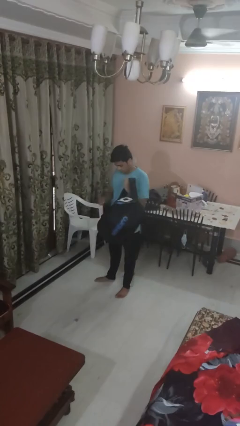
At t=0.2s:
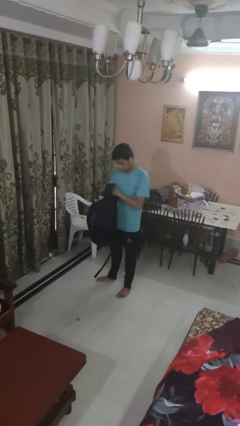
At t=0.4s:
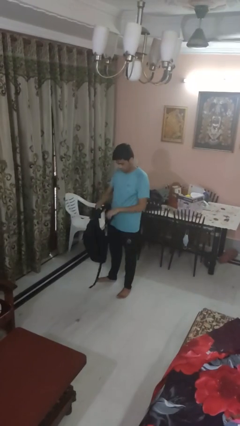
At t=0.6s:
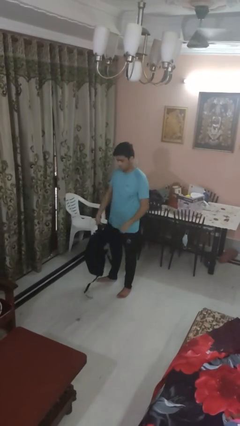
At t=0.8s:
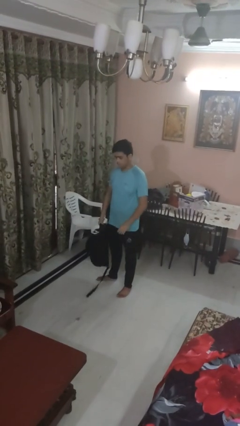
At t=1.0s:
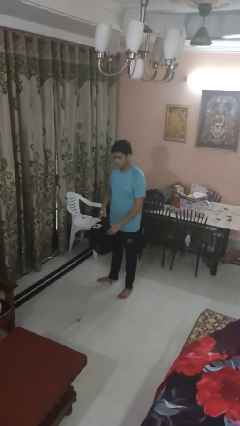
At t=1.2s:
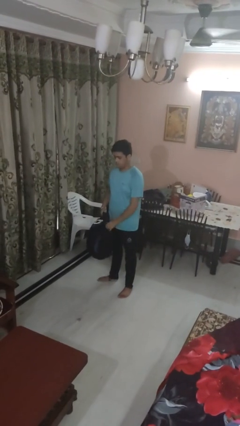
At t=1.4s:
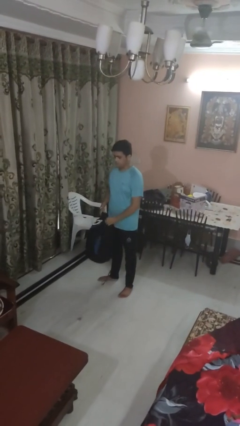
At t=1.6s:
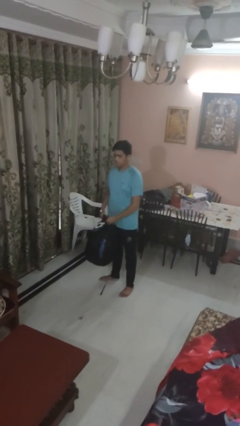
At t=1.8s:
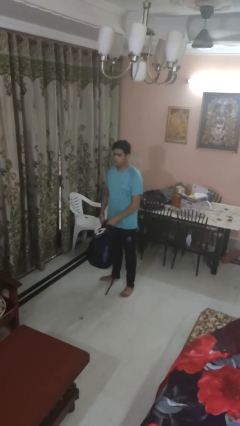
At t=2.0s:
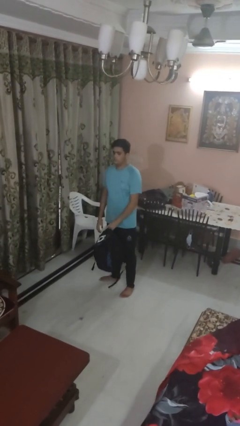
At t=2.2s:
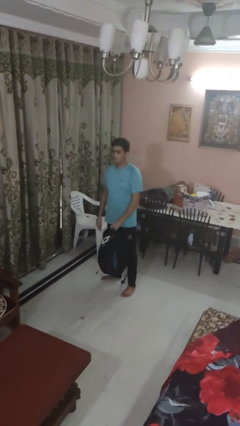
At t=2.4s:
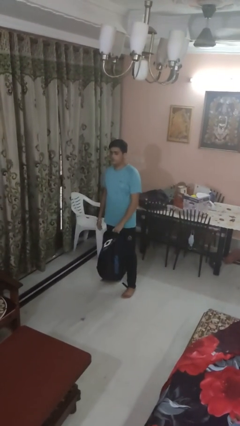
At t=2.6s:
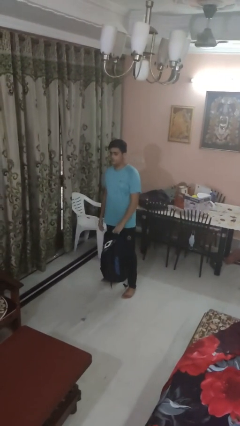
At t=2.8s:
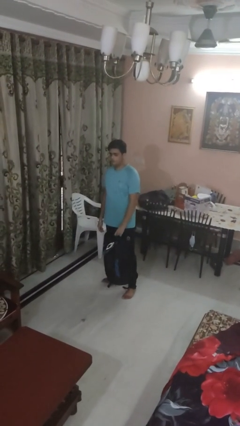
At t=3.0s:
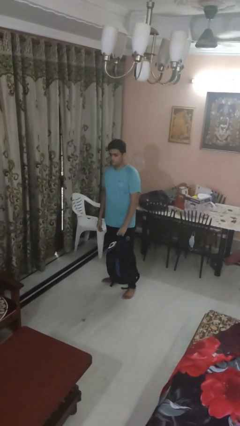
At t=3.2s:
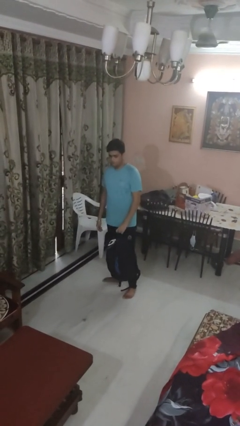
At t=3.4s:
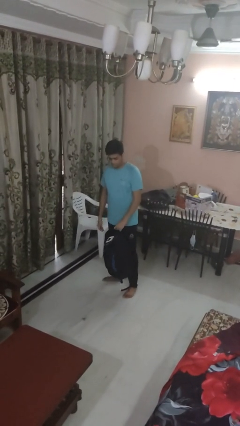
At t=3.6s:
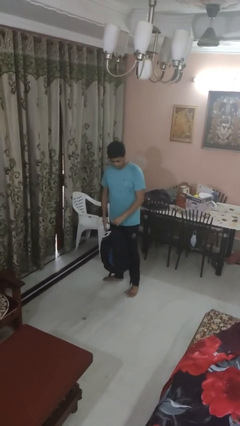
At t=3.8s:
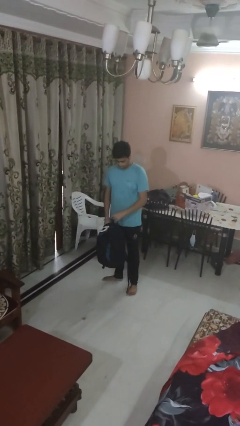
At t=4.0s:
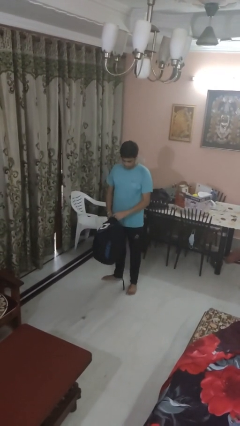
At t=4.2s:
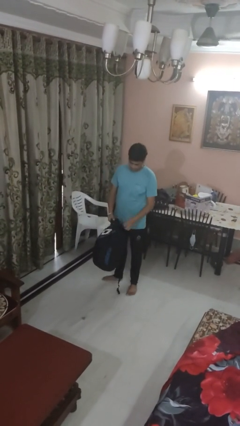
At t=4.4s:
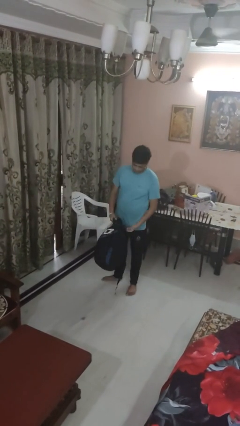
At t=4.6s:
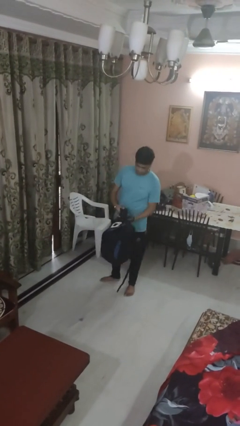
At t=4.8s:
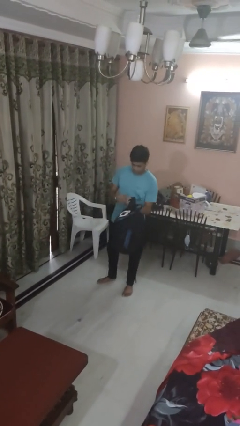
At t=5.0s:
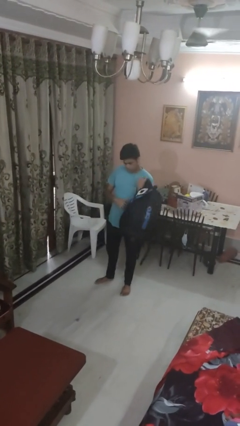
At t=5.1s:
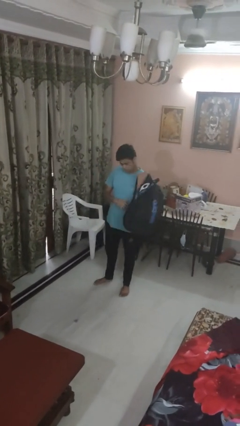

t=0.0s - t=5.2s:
person takes off backpack

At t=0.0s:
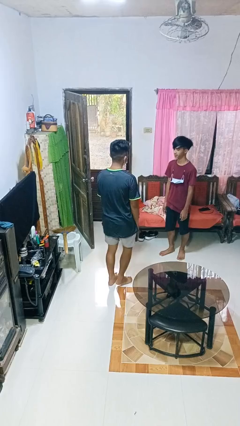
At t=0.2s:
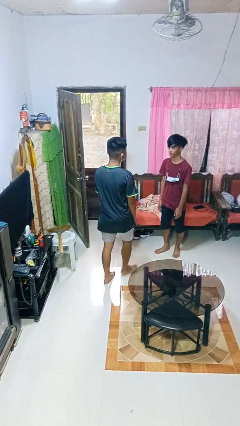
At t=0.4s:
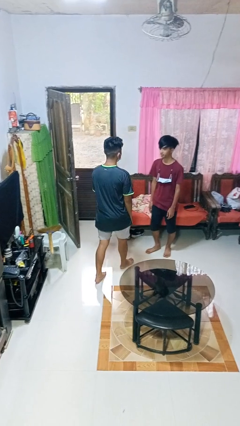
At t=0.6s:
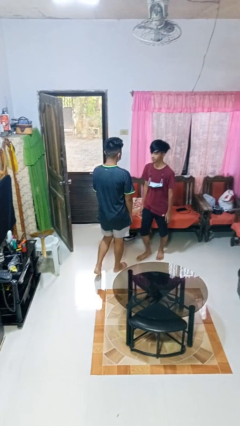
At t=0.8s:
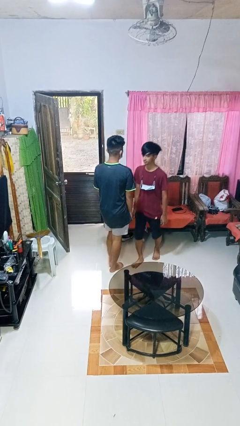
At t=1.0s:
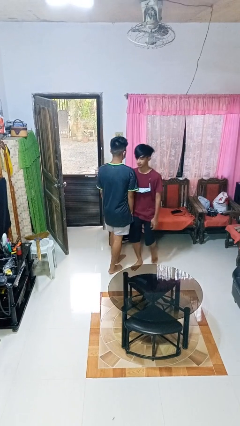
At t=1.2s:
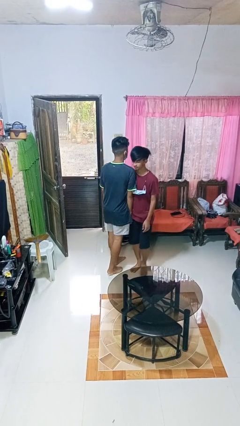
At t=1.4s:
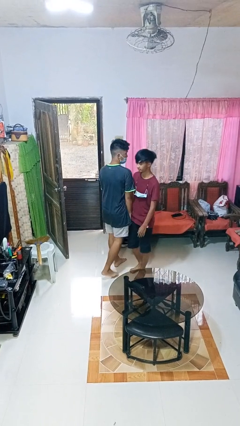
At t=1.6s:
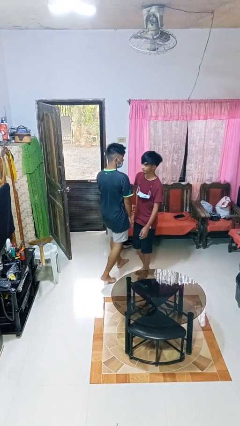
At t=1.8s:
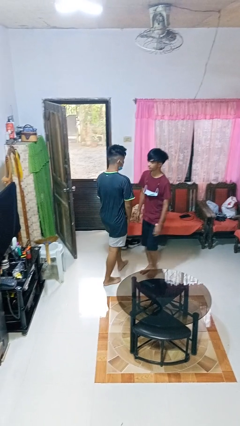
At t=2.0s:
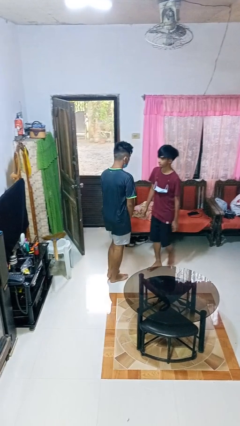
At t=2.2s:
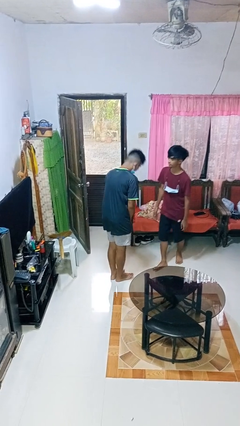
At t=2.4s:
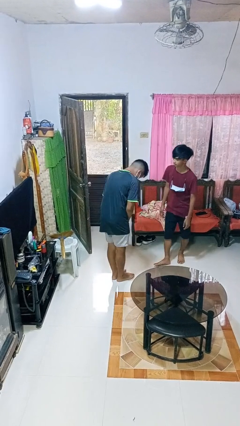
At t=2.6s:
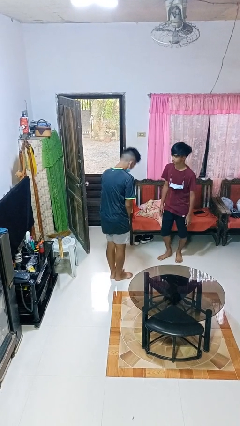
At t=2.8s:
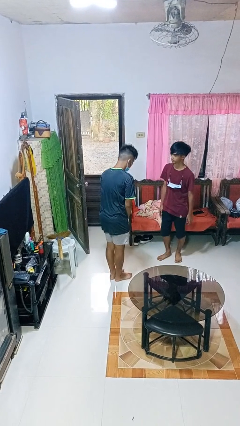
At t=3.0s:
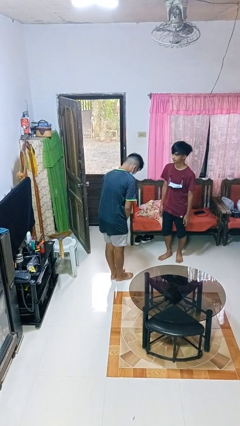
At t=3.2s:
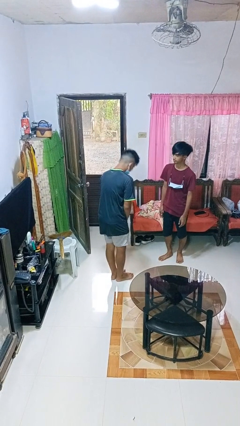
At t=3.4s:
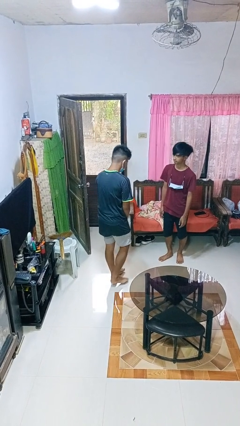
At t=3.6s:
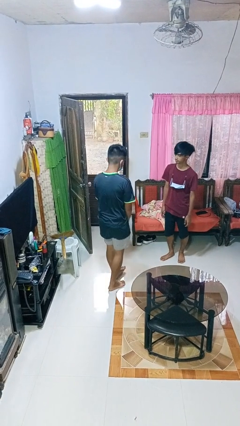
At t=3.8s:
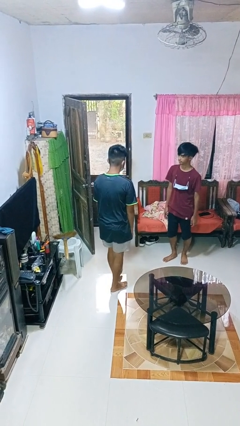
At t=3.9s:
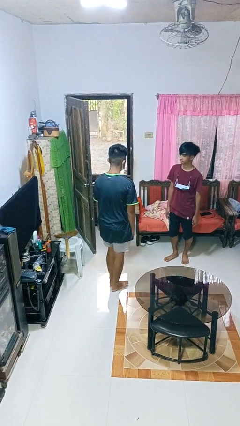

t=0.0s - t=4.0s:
person bumps into person

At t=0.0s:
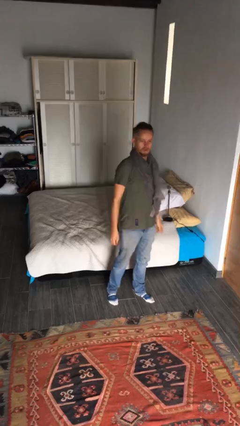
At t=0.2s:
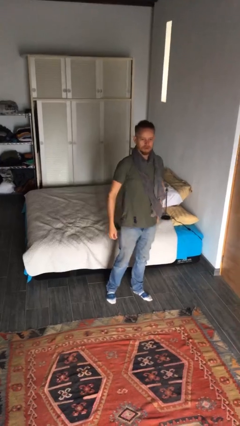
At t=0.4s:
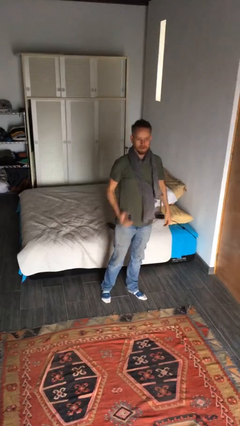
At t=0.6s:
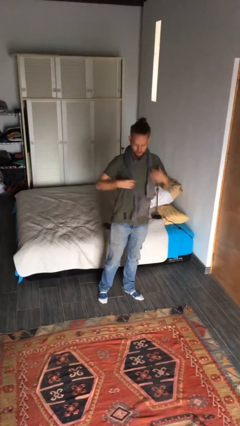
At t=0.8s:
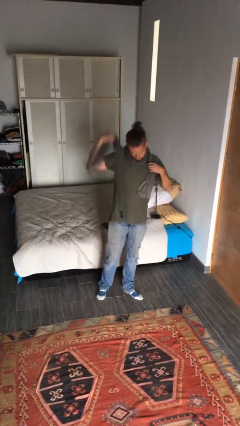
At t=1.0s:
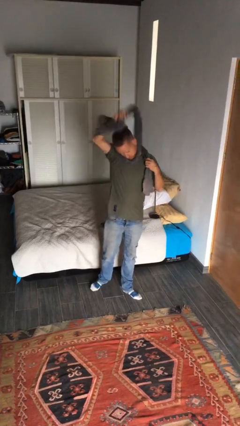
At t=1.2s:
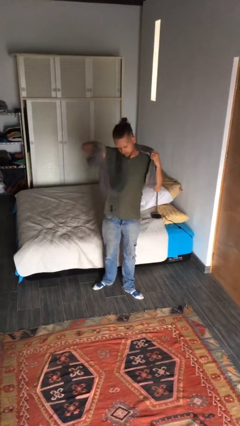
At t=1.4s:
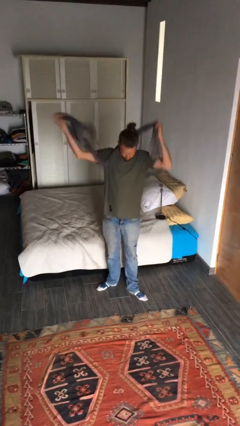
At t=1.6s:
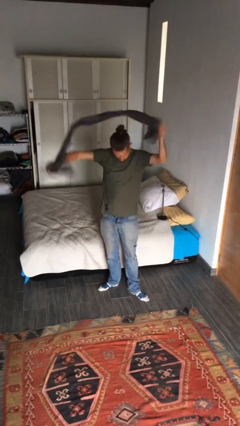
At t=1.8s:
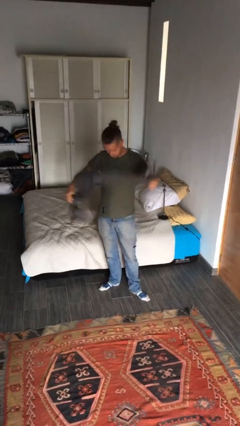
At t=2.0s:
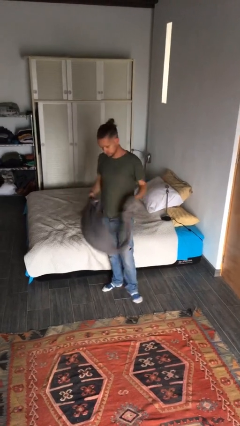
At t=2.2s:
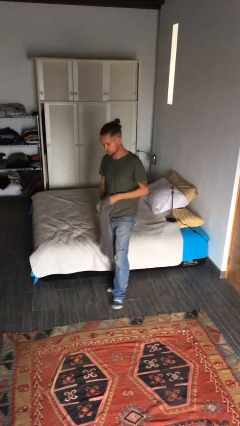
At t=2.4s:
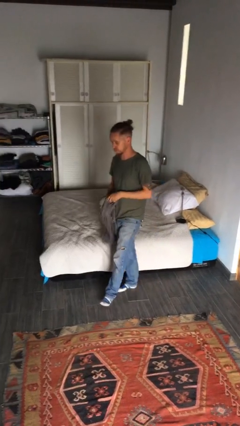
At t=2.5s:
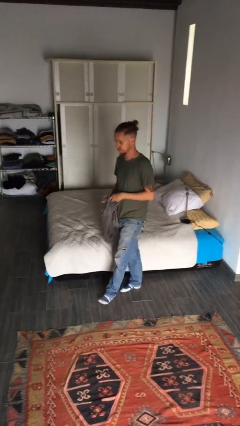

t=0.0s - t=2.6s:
person takes off scarf

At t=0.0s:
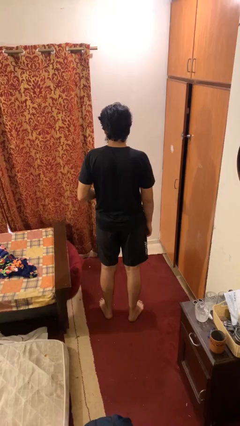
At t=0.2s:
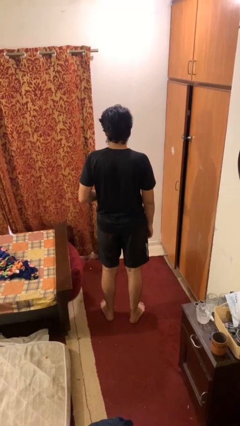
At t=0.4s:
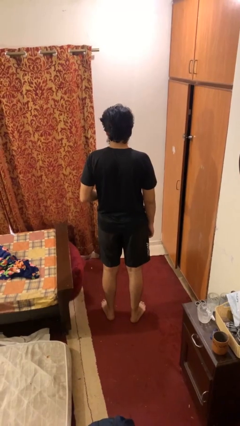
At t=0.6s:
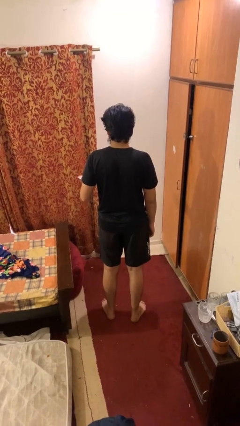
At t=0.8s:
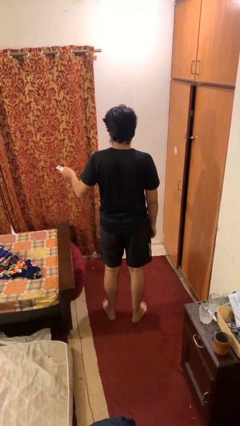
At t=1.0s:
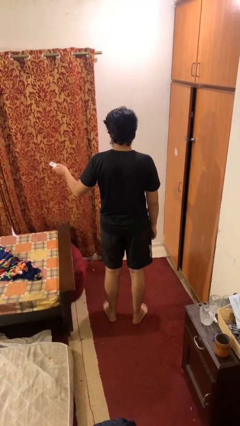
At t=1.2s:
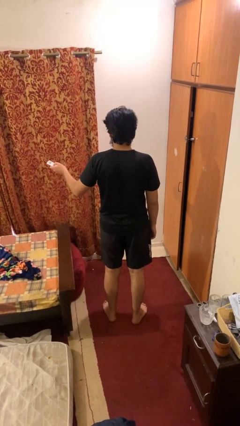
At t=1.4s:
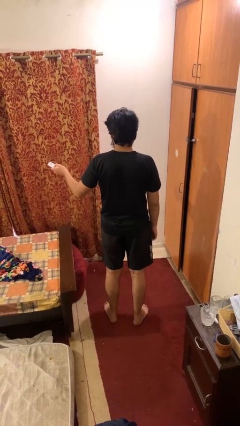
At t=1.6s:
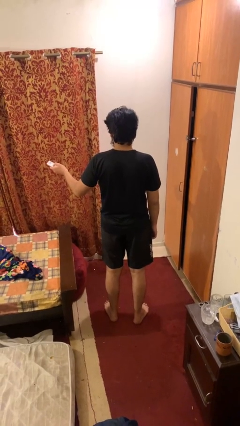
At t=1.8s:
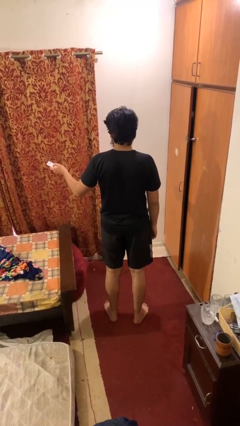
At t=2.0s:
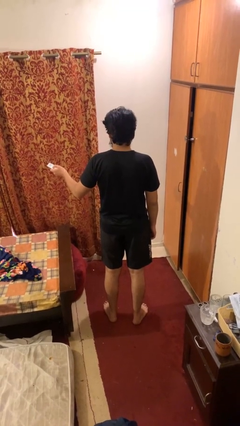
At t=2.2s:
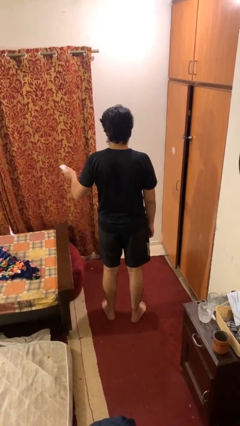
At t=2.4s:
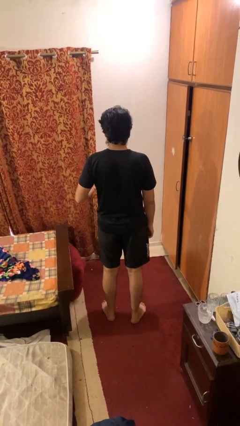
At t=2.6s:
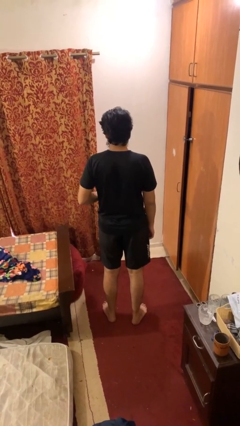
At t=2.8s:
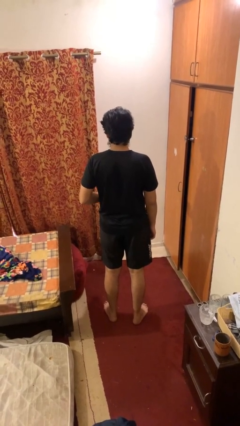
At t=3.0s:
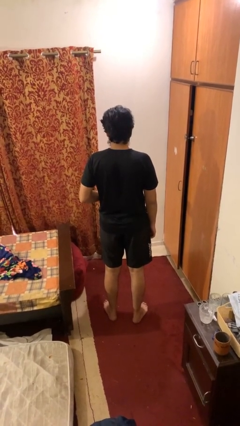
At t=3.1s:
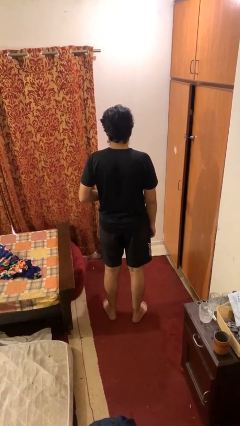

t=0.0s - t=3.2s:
person uses television remote

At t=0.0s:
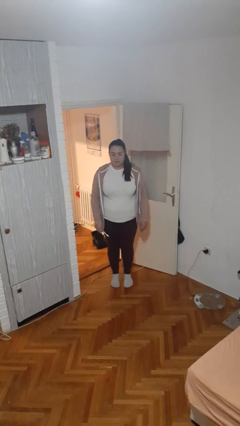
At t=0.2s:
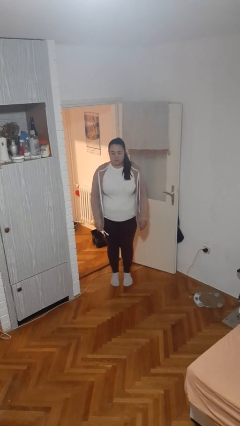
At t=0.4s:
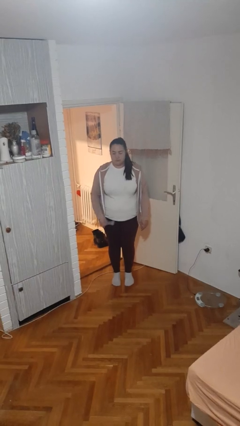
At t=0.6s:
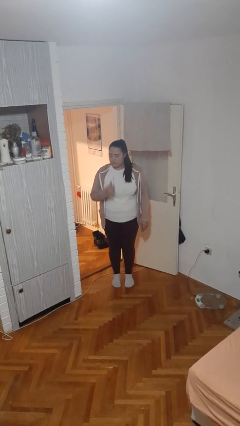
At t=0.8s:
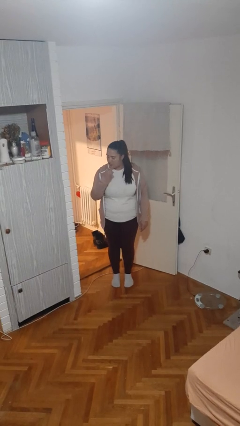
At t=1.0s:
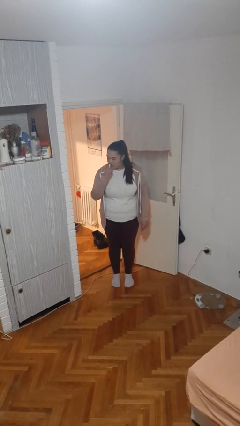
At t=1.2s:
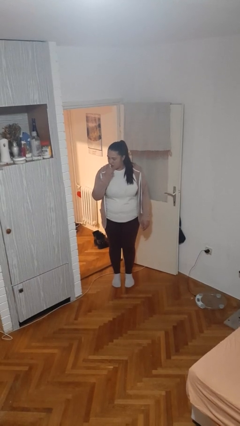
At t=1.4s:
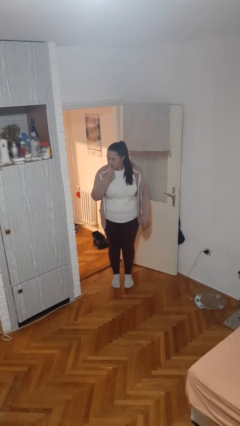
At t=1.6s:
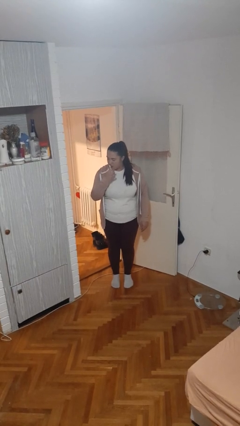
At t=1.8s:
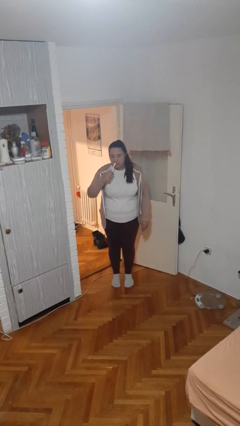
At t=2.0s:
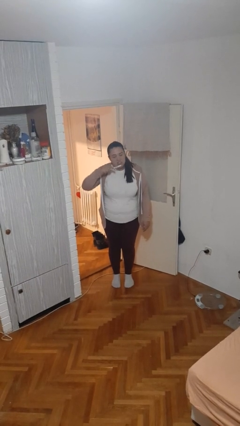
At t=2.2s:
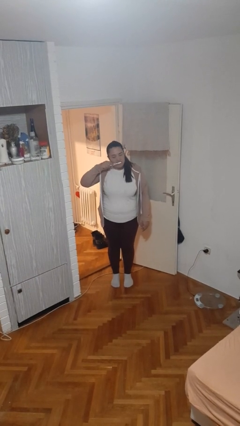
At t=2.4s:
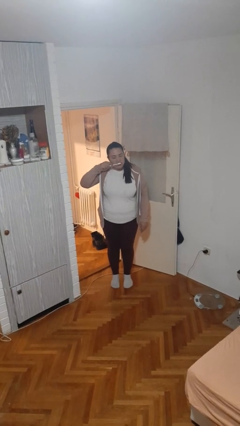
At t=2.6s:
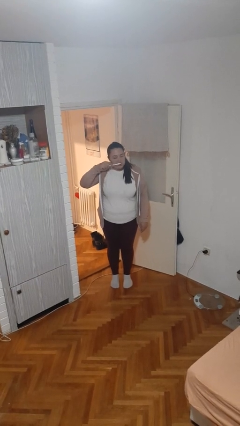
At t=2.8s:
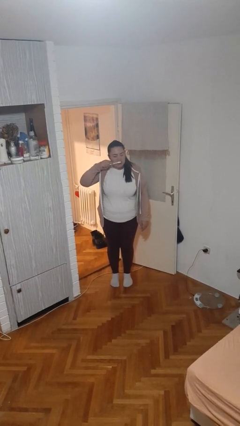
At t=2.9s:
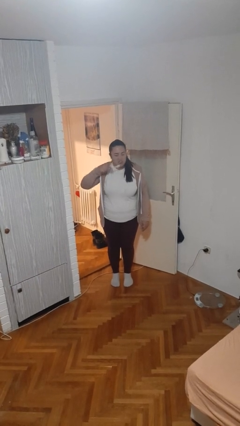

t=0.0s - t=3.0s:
person brushes hair
